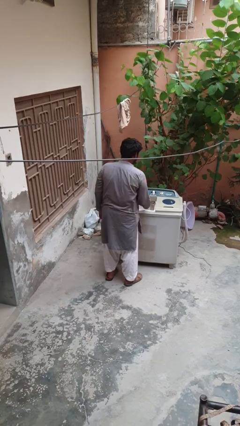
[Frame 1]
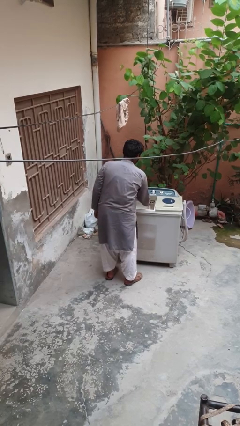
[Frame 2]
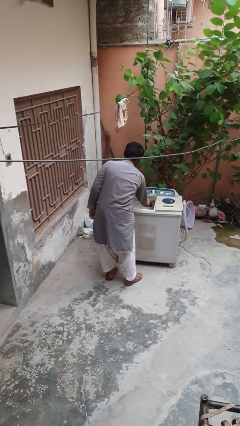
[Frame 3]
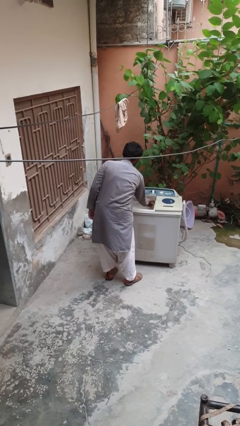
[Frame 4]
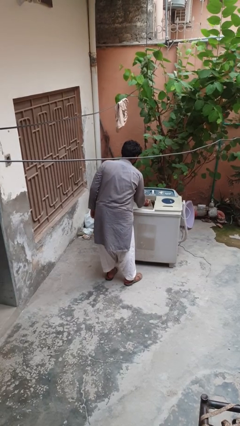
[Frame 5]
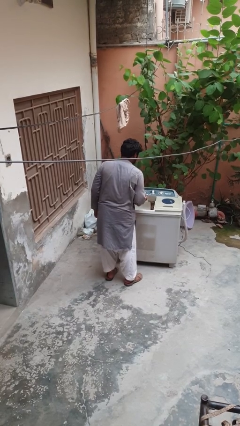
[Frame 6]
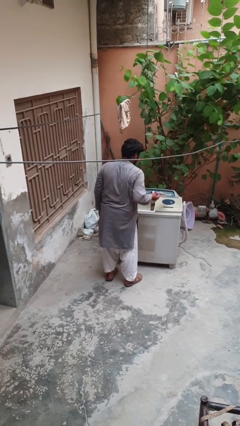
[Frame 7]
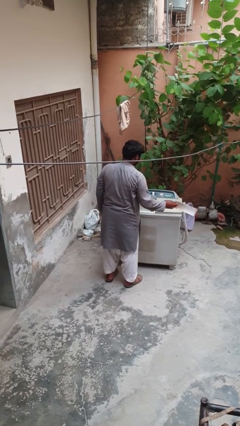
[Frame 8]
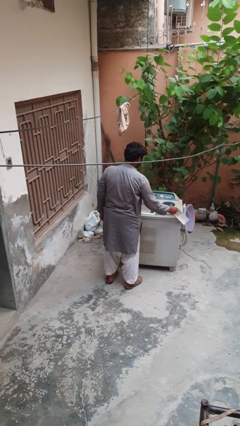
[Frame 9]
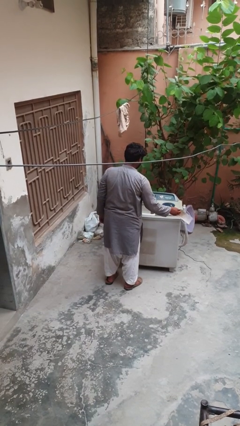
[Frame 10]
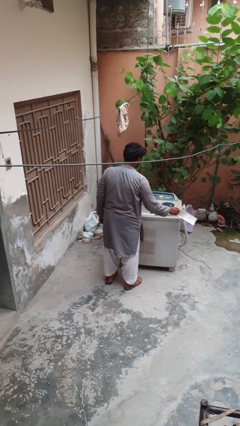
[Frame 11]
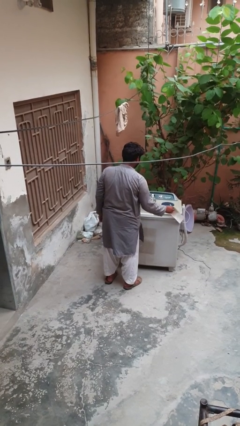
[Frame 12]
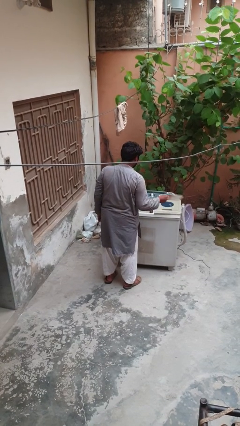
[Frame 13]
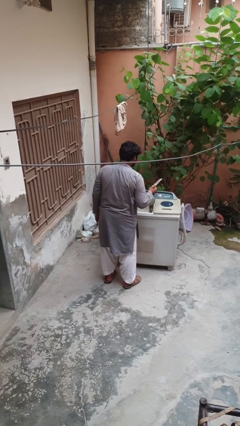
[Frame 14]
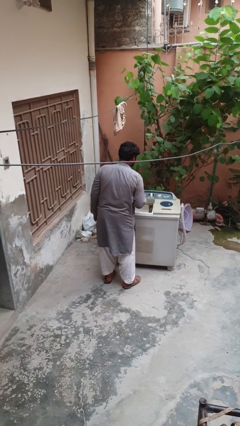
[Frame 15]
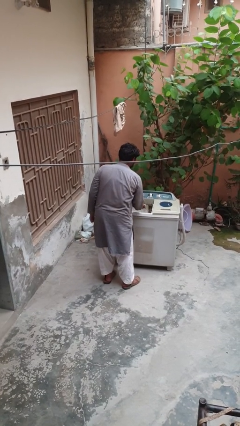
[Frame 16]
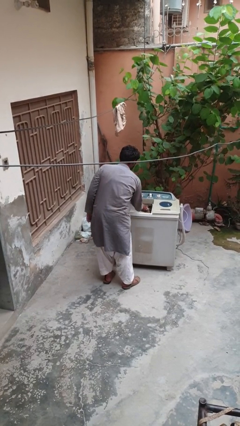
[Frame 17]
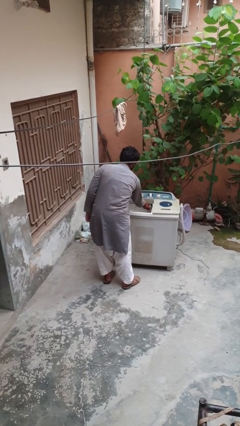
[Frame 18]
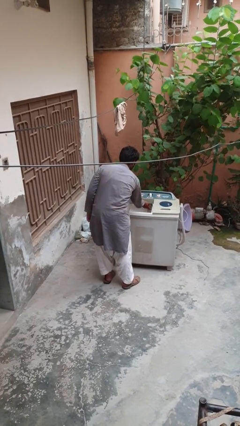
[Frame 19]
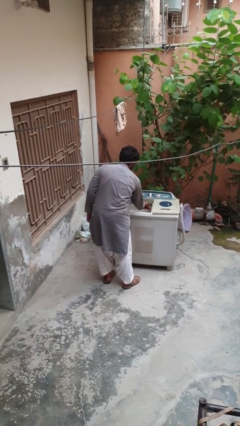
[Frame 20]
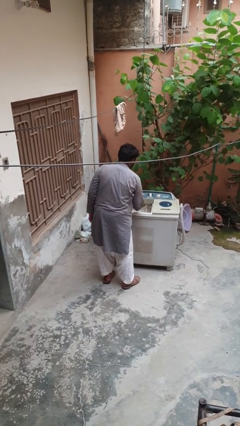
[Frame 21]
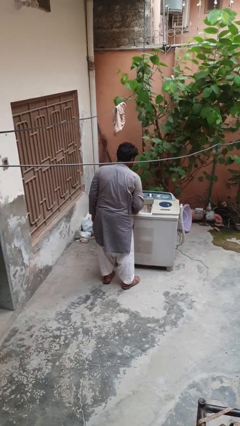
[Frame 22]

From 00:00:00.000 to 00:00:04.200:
person cleans dryer lint trap

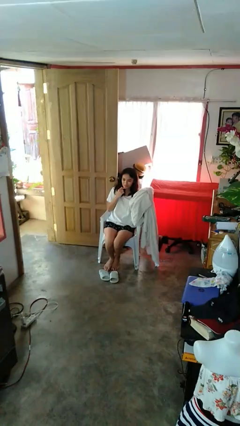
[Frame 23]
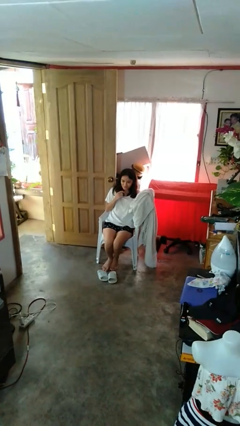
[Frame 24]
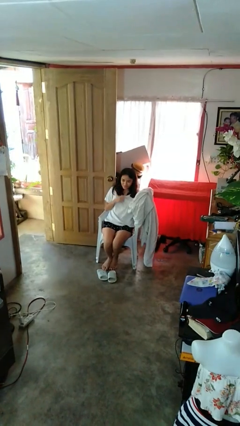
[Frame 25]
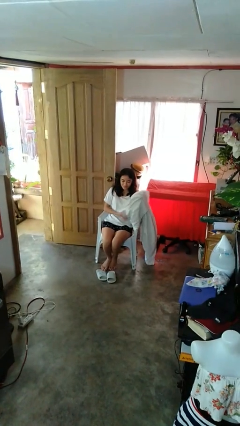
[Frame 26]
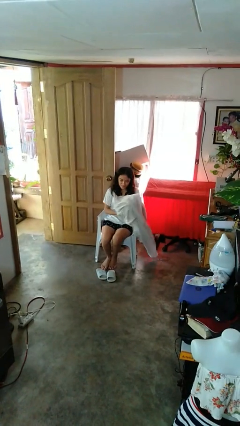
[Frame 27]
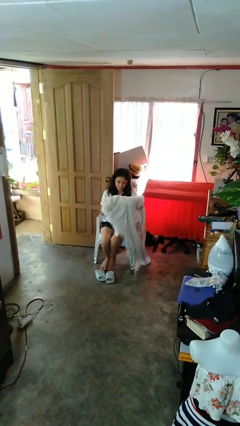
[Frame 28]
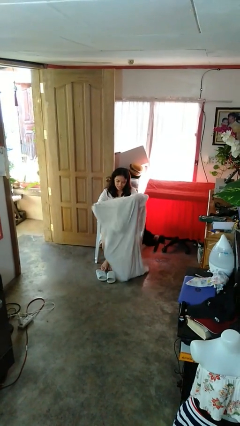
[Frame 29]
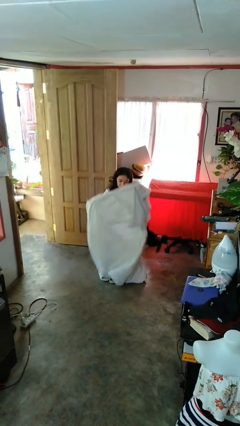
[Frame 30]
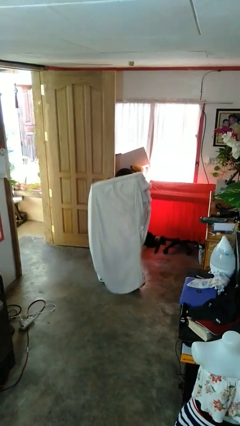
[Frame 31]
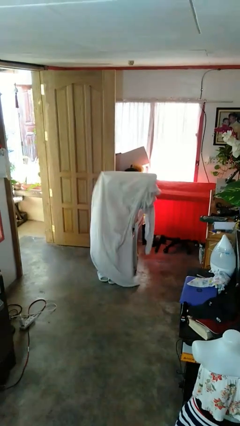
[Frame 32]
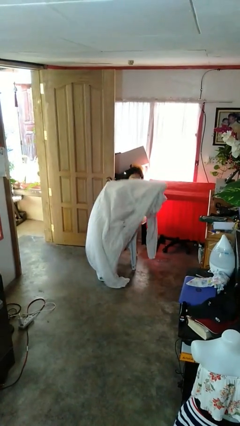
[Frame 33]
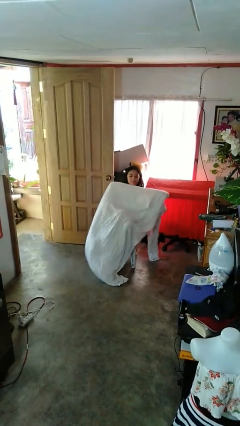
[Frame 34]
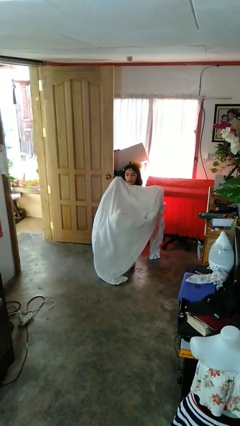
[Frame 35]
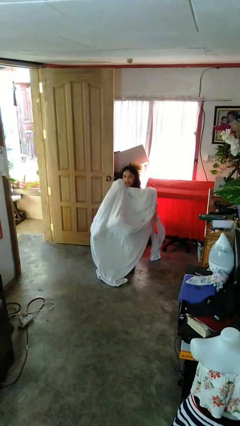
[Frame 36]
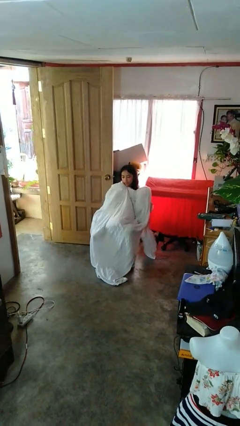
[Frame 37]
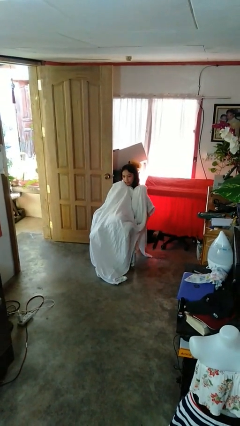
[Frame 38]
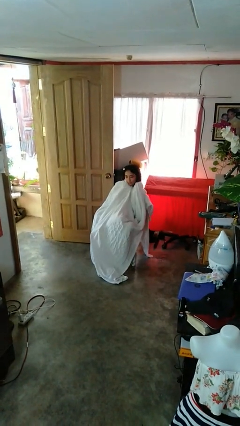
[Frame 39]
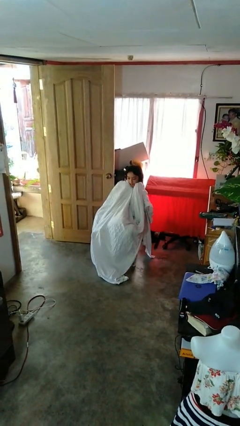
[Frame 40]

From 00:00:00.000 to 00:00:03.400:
person covers with blanket

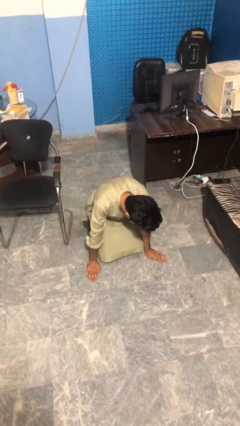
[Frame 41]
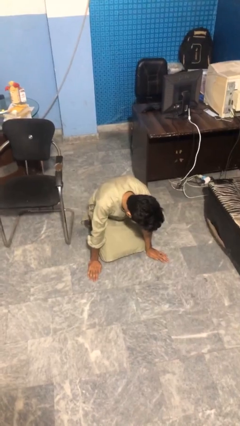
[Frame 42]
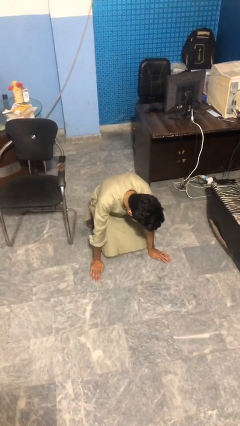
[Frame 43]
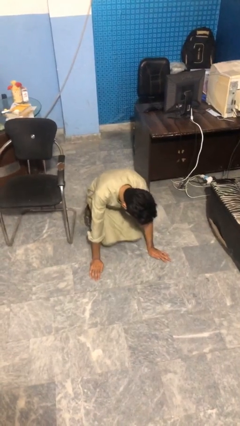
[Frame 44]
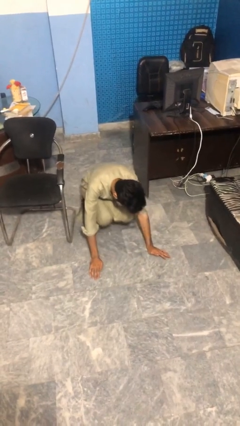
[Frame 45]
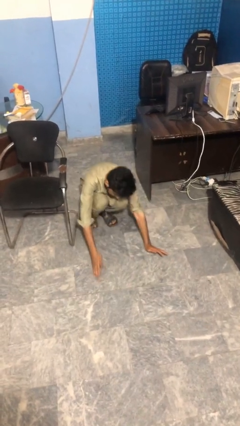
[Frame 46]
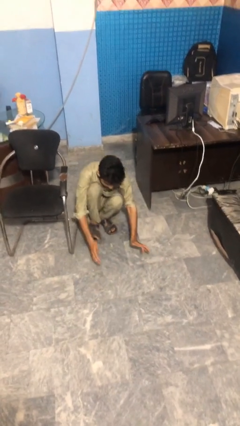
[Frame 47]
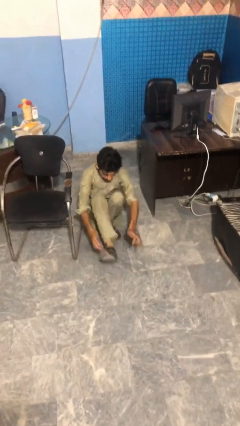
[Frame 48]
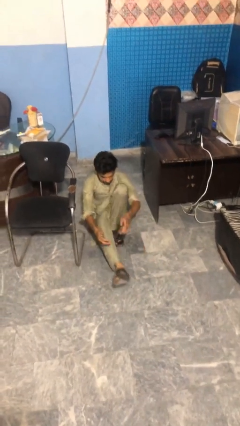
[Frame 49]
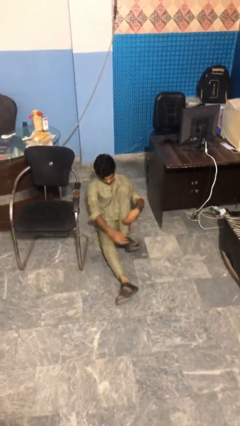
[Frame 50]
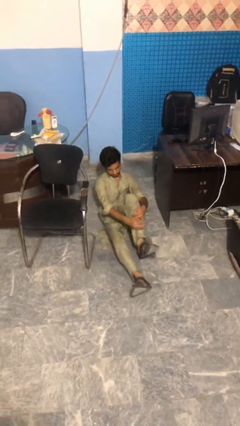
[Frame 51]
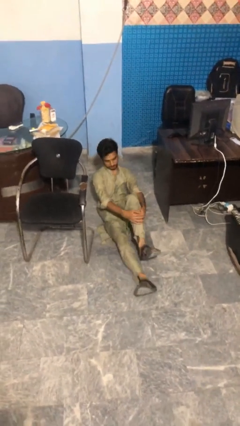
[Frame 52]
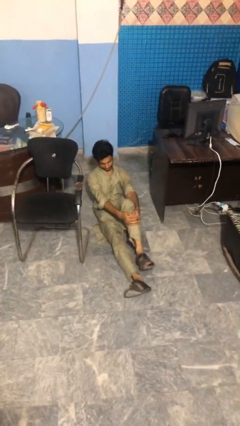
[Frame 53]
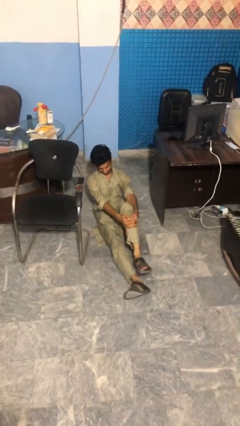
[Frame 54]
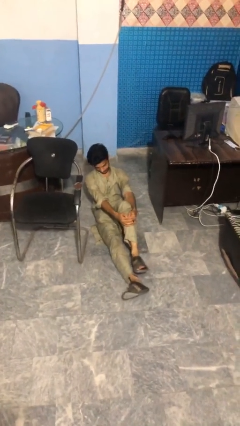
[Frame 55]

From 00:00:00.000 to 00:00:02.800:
person lies down on floor

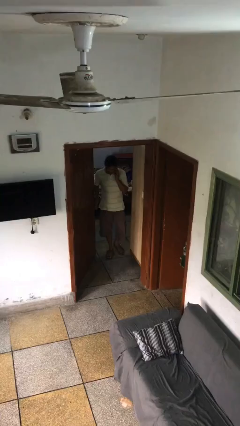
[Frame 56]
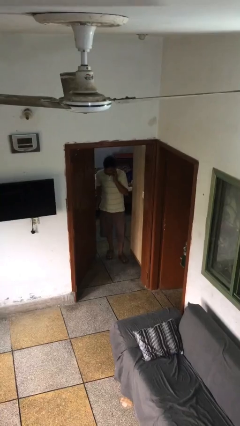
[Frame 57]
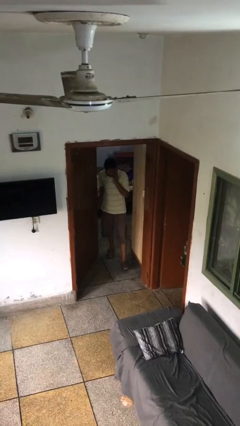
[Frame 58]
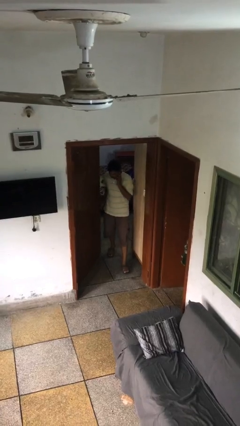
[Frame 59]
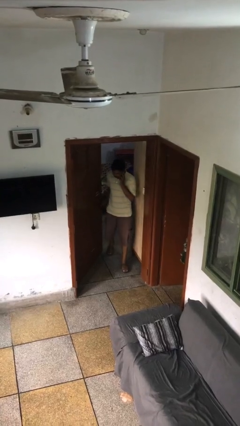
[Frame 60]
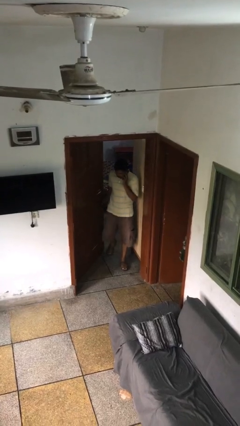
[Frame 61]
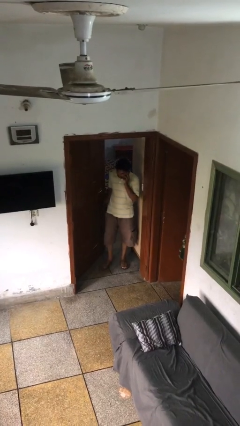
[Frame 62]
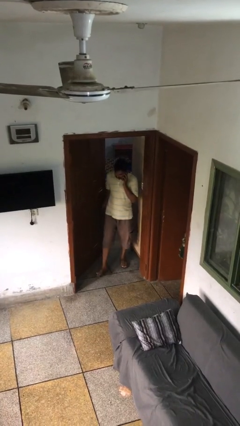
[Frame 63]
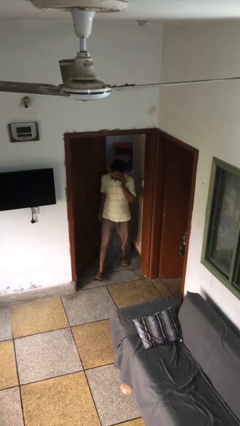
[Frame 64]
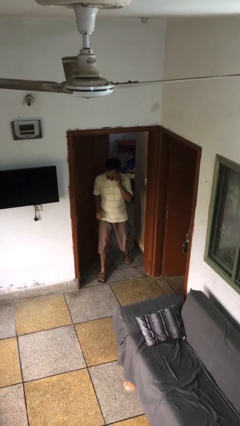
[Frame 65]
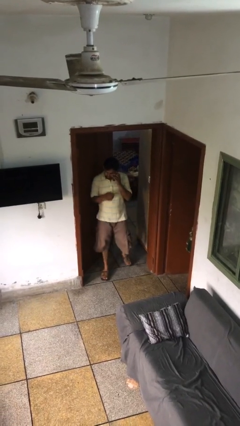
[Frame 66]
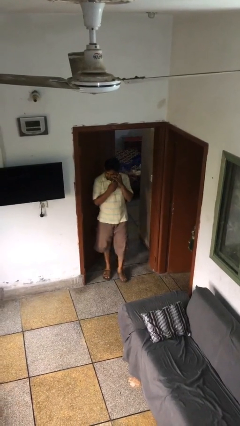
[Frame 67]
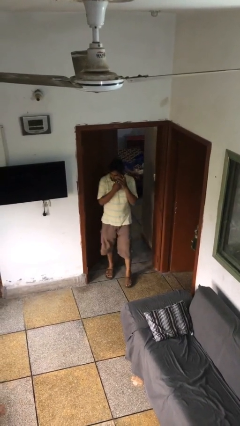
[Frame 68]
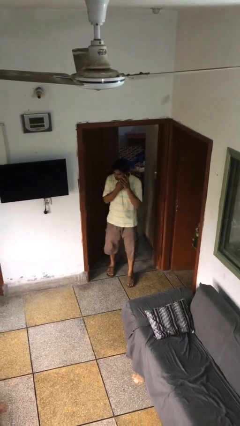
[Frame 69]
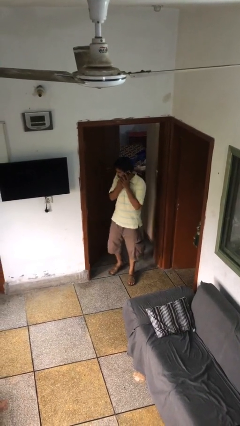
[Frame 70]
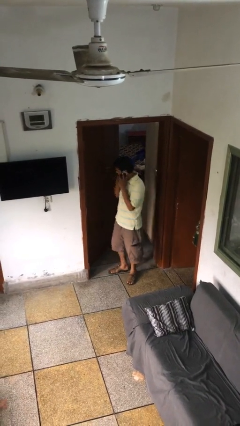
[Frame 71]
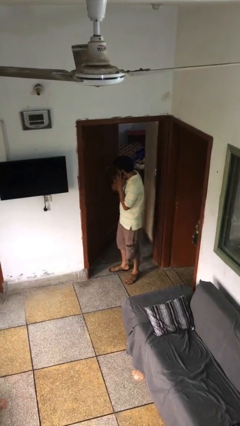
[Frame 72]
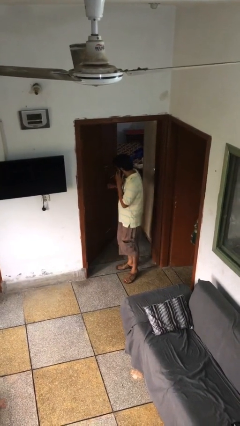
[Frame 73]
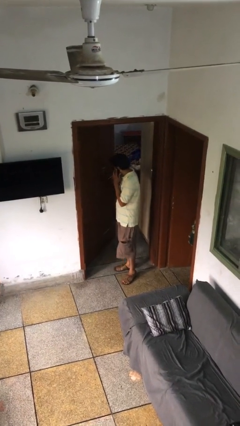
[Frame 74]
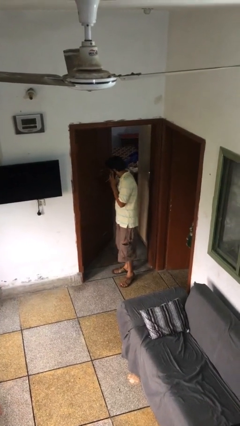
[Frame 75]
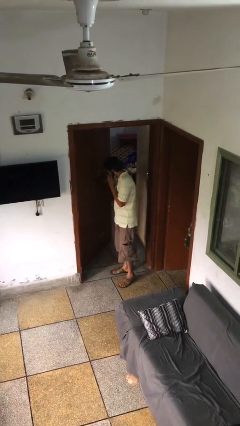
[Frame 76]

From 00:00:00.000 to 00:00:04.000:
person enters scene through structure

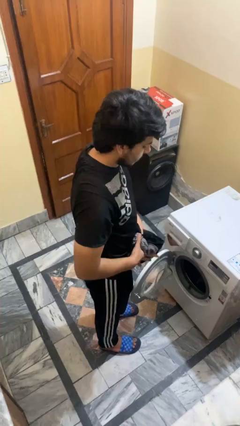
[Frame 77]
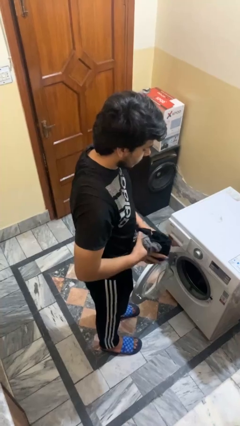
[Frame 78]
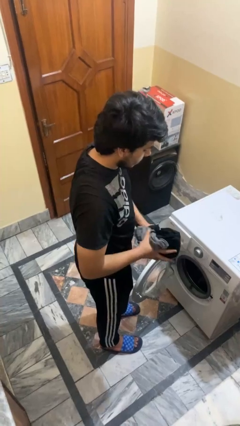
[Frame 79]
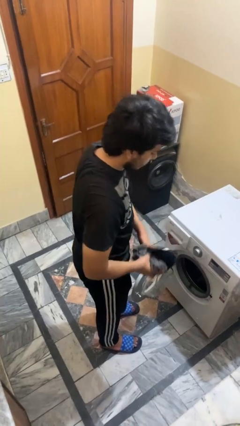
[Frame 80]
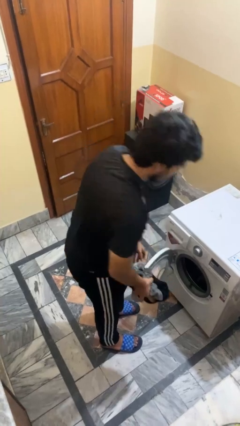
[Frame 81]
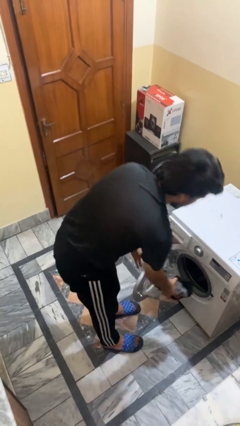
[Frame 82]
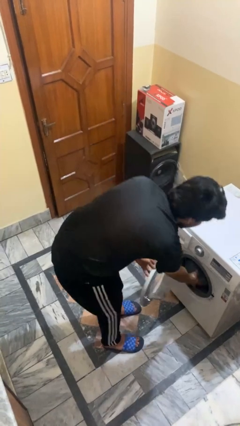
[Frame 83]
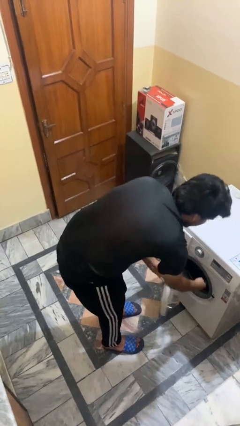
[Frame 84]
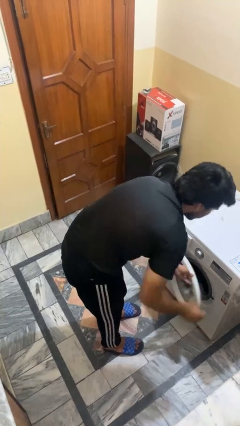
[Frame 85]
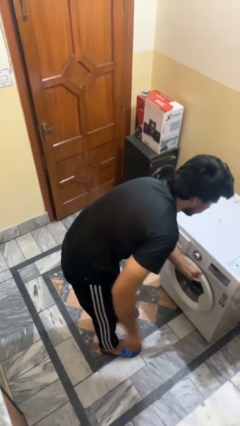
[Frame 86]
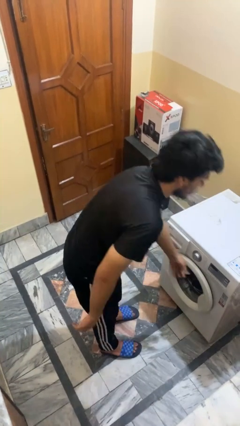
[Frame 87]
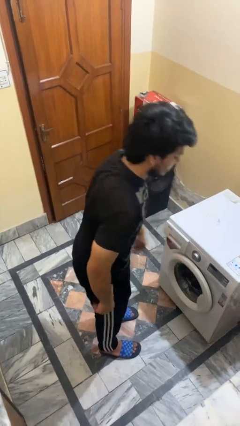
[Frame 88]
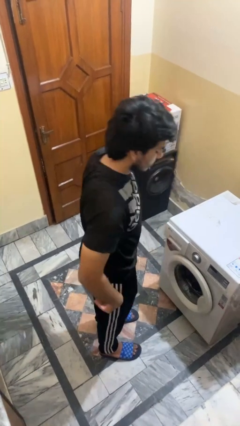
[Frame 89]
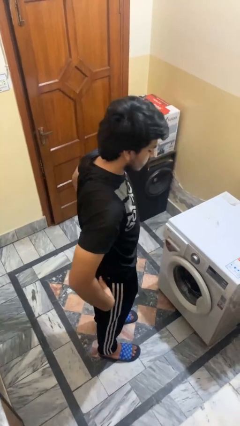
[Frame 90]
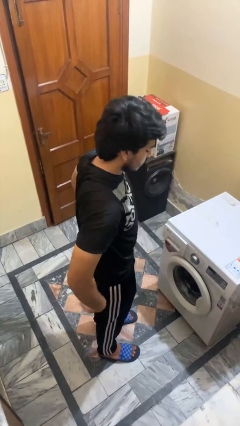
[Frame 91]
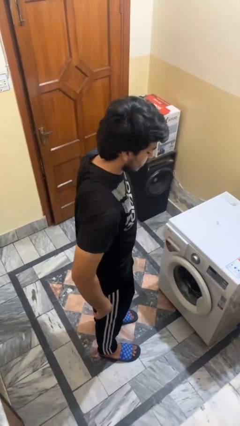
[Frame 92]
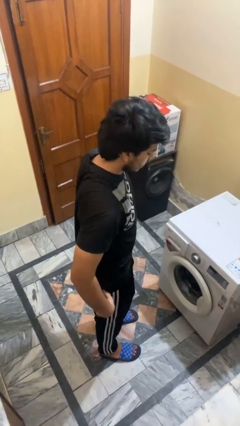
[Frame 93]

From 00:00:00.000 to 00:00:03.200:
person loads clotheswasher
